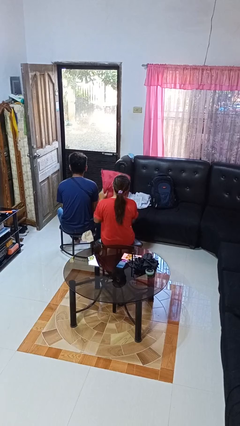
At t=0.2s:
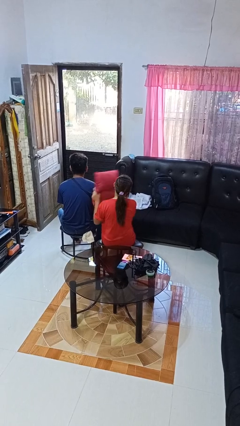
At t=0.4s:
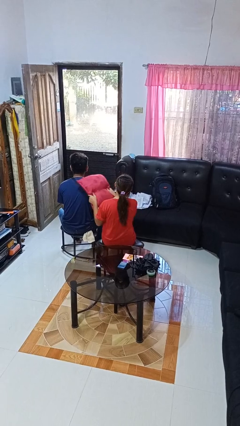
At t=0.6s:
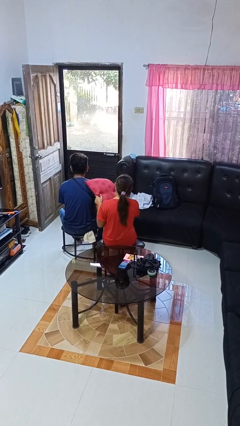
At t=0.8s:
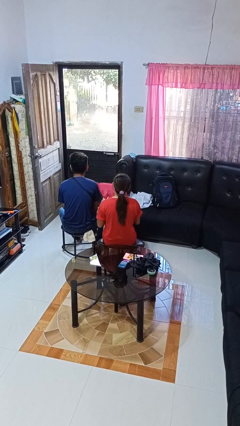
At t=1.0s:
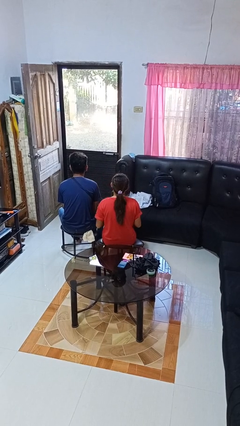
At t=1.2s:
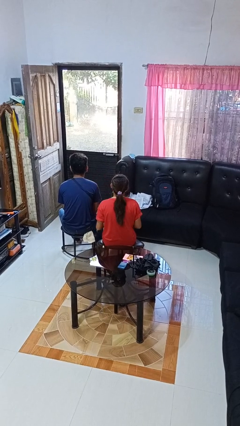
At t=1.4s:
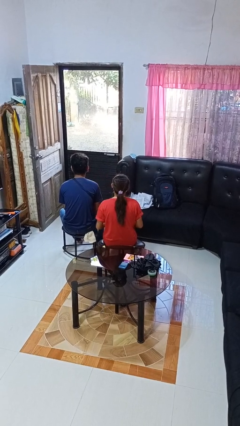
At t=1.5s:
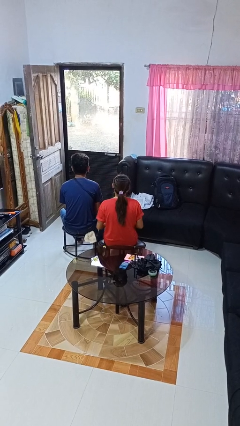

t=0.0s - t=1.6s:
person hits person with pillow

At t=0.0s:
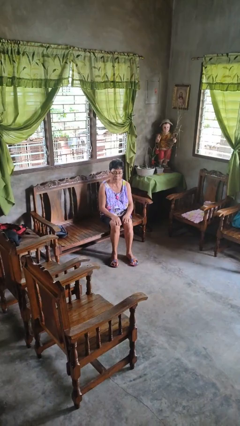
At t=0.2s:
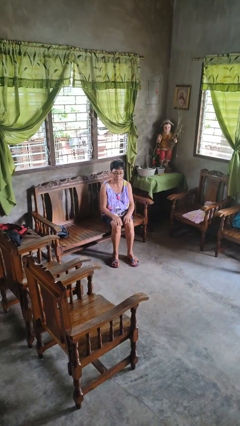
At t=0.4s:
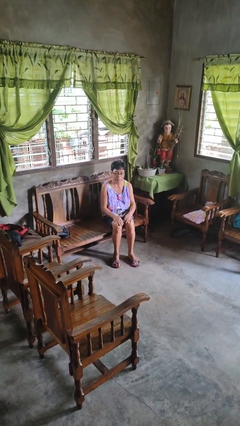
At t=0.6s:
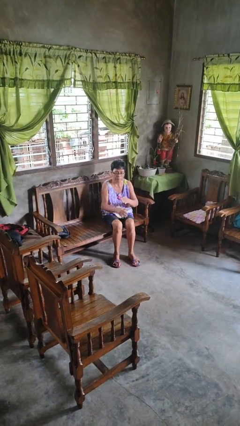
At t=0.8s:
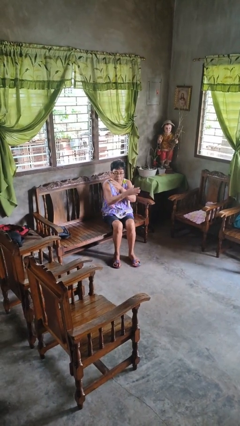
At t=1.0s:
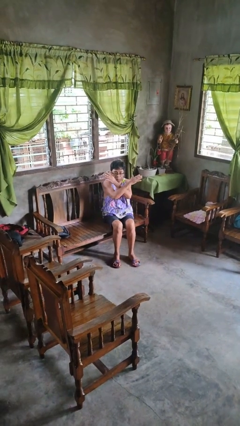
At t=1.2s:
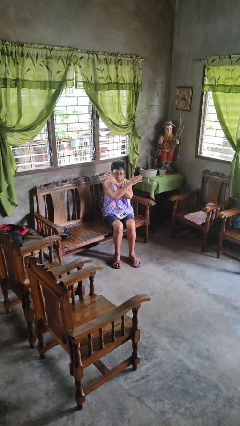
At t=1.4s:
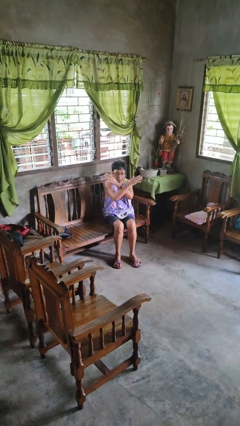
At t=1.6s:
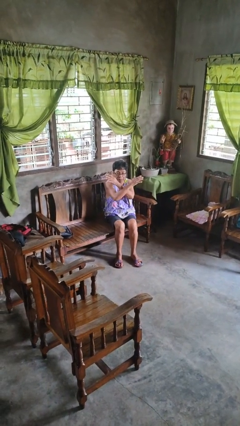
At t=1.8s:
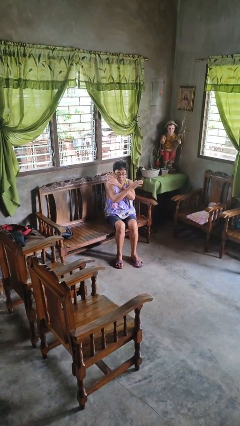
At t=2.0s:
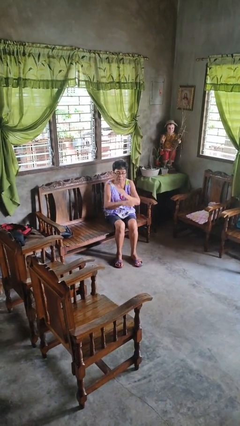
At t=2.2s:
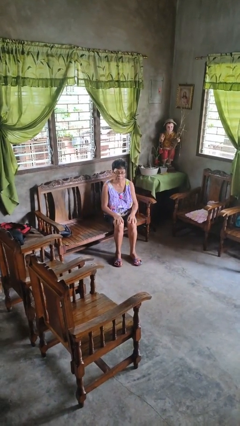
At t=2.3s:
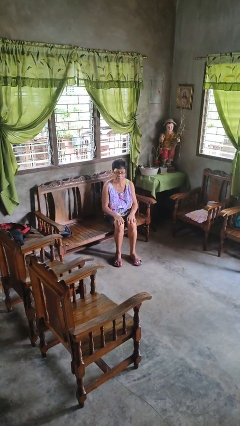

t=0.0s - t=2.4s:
person gestures arms x

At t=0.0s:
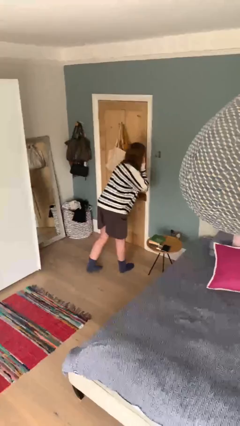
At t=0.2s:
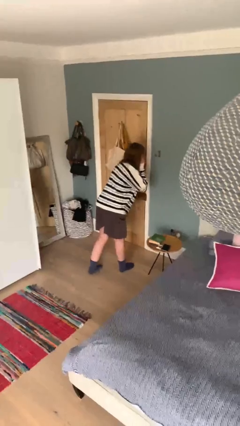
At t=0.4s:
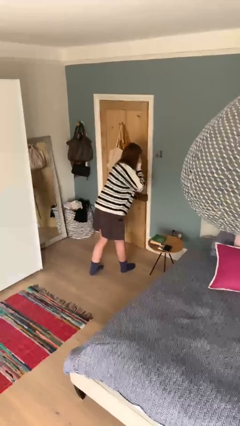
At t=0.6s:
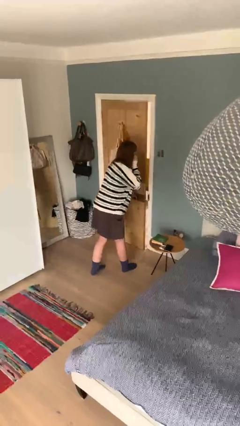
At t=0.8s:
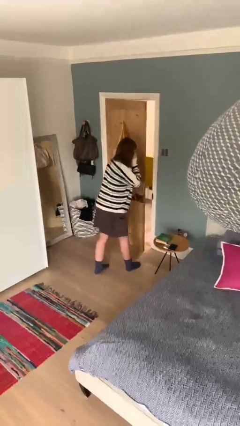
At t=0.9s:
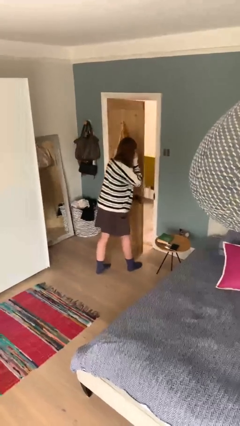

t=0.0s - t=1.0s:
person opens facility door

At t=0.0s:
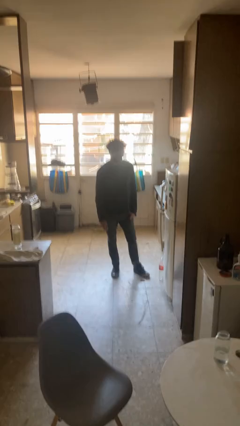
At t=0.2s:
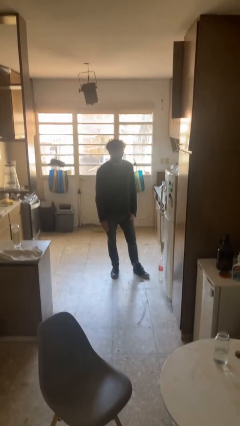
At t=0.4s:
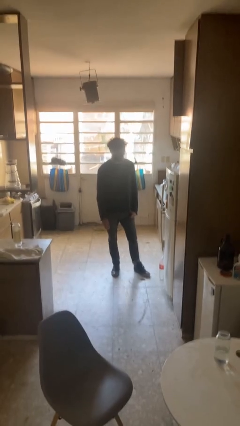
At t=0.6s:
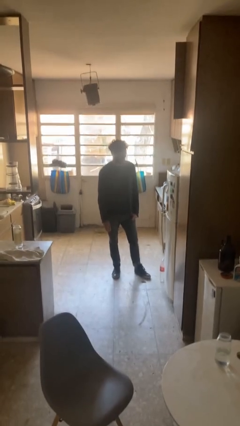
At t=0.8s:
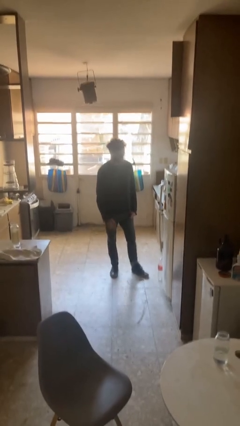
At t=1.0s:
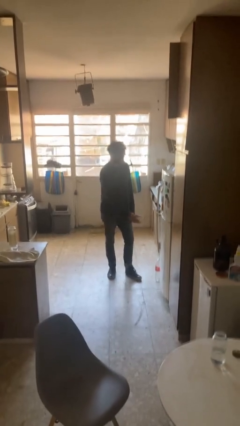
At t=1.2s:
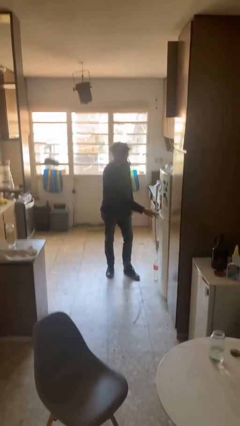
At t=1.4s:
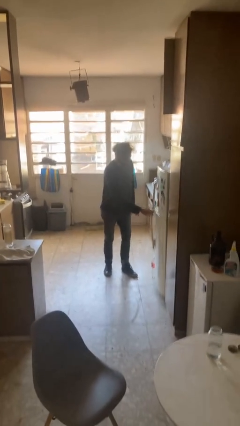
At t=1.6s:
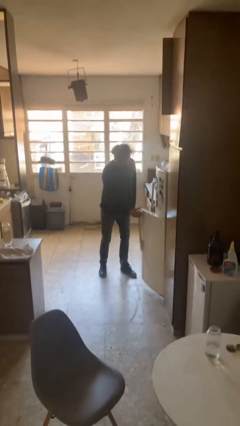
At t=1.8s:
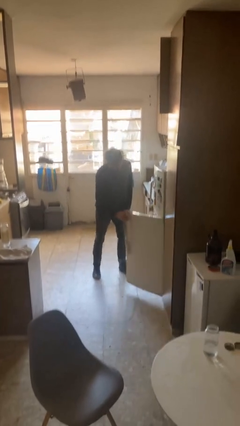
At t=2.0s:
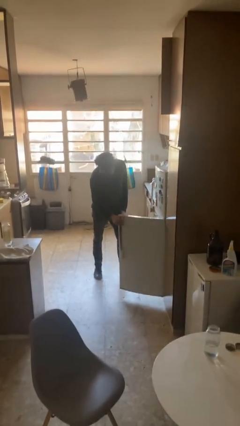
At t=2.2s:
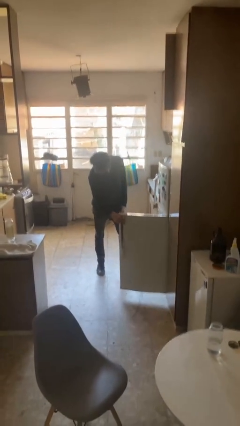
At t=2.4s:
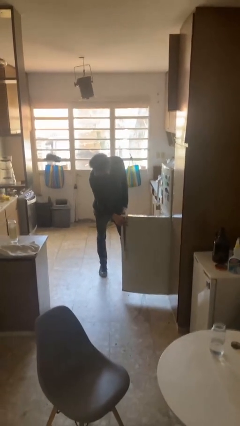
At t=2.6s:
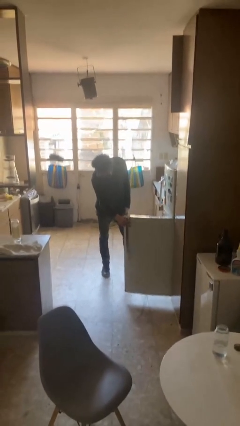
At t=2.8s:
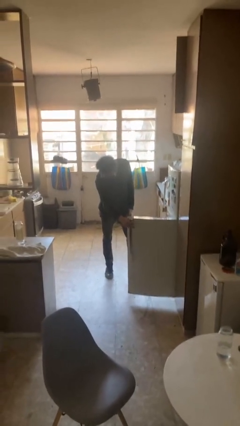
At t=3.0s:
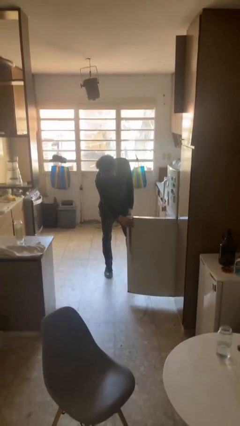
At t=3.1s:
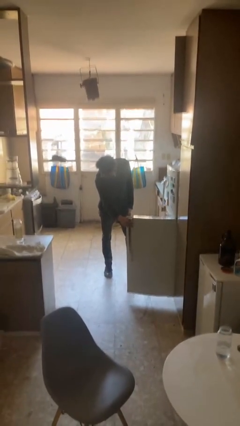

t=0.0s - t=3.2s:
person opens refrigerator

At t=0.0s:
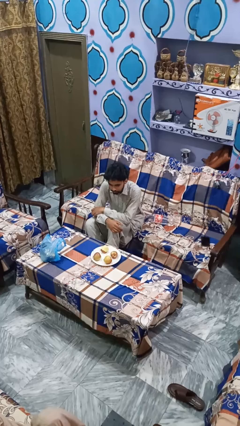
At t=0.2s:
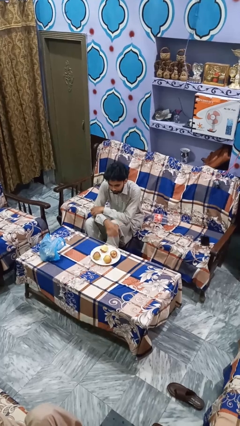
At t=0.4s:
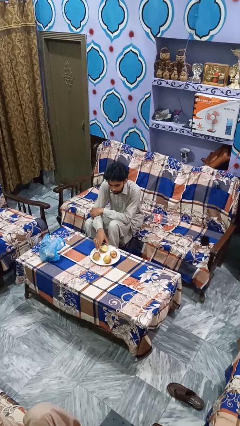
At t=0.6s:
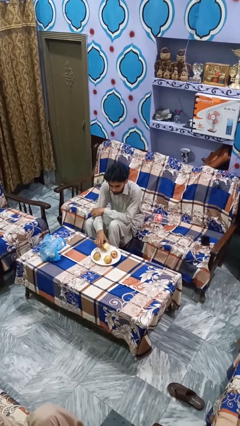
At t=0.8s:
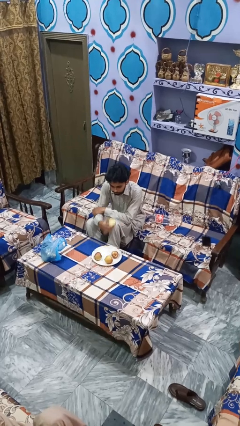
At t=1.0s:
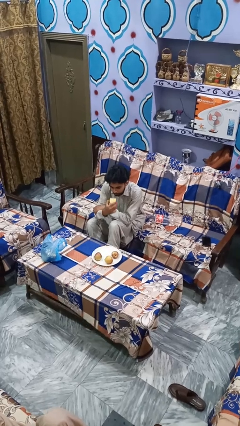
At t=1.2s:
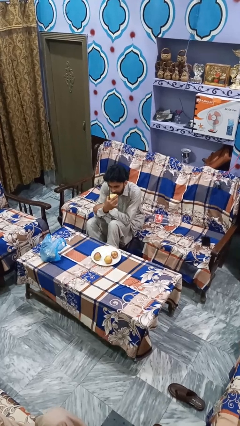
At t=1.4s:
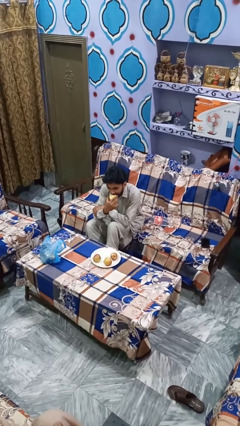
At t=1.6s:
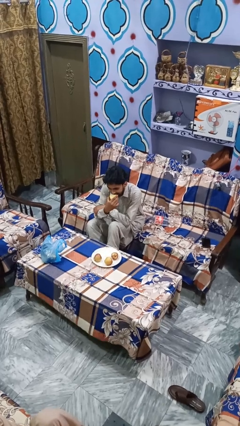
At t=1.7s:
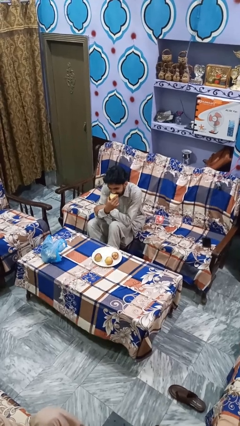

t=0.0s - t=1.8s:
person eats apple

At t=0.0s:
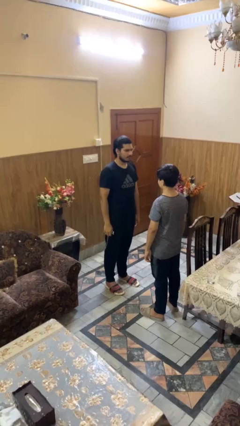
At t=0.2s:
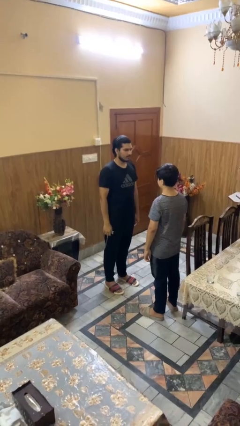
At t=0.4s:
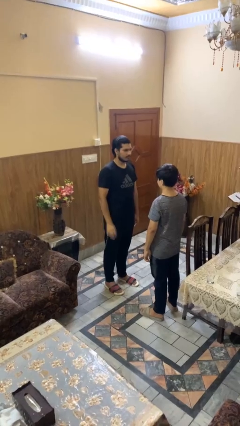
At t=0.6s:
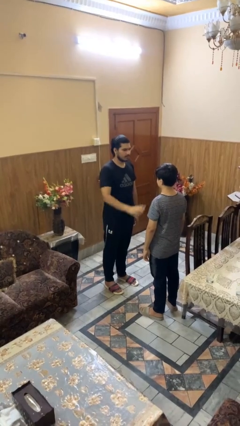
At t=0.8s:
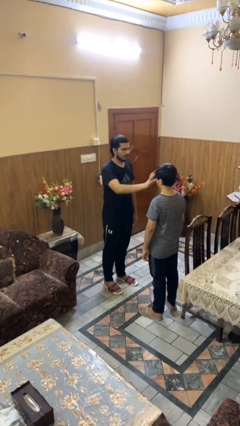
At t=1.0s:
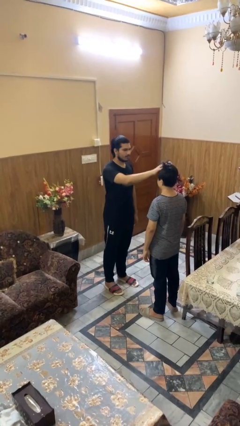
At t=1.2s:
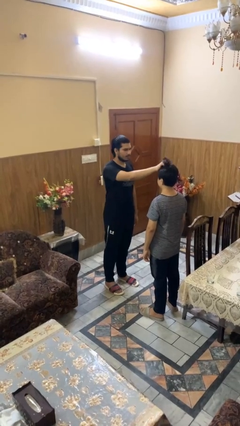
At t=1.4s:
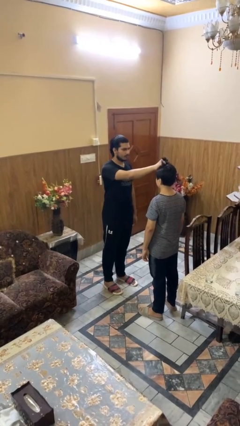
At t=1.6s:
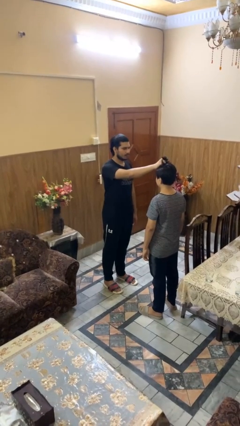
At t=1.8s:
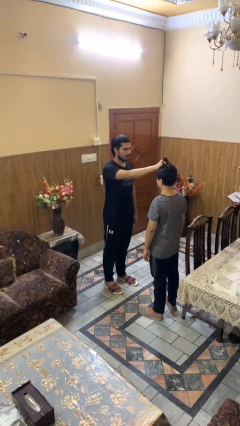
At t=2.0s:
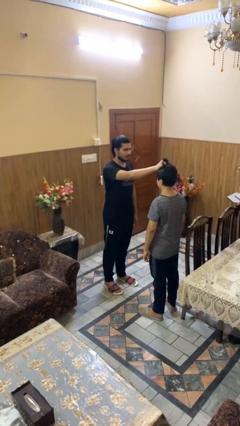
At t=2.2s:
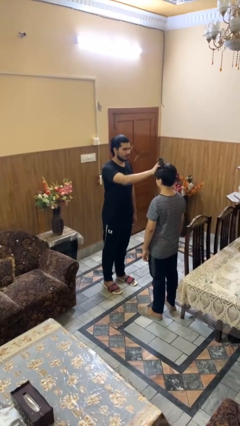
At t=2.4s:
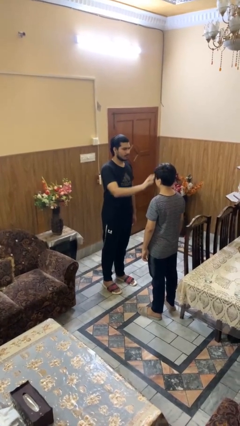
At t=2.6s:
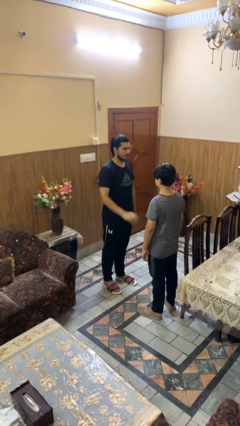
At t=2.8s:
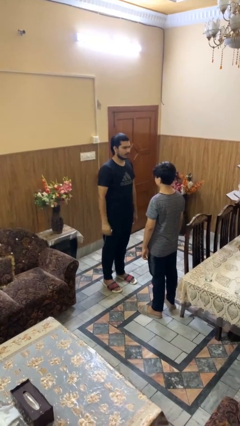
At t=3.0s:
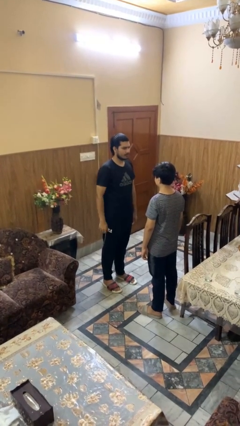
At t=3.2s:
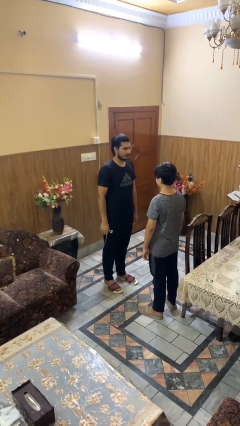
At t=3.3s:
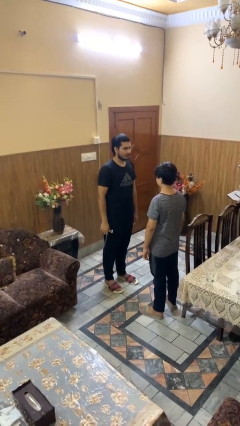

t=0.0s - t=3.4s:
person grabs person by hair

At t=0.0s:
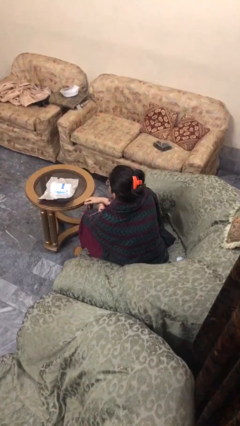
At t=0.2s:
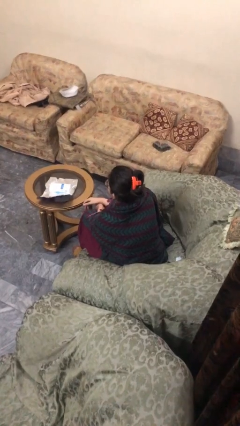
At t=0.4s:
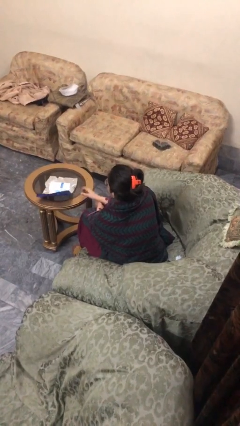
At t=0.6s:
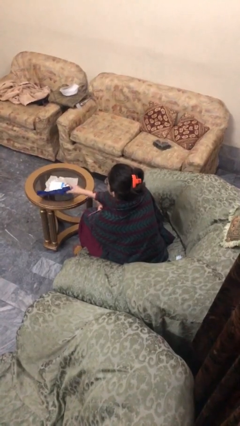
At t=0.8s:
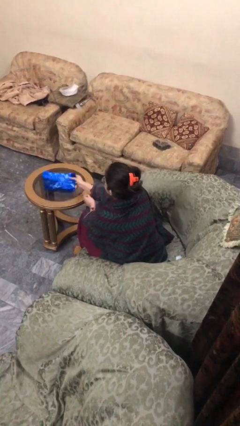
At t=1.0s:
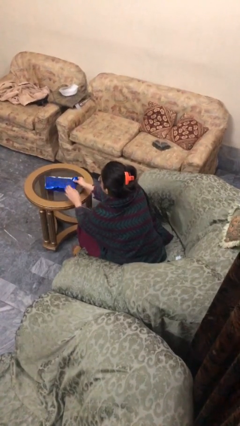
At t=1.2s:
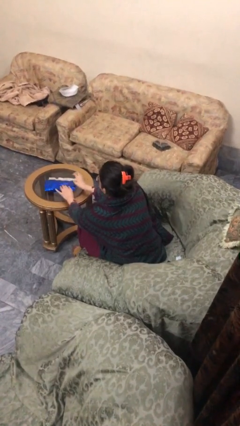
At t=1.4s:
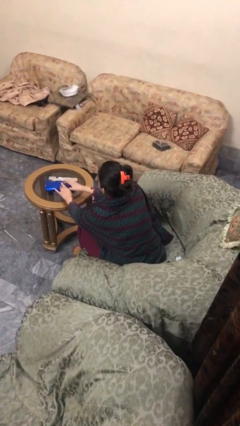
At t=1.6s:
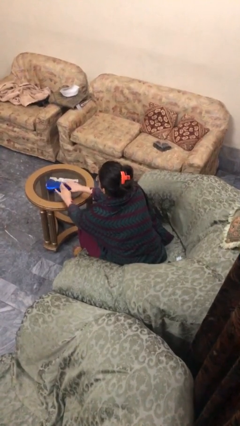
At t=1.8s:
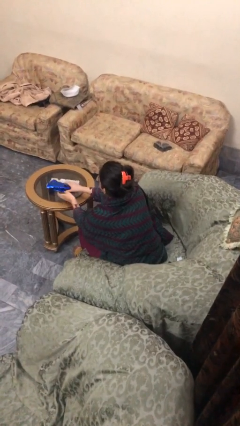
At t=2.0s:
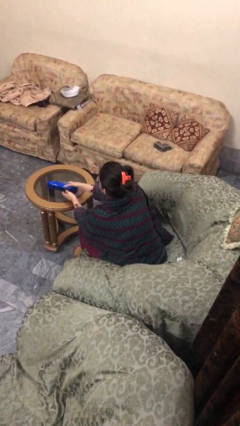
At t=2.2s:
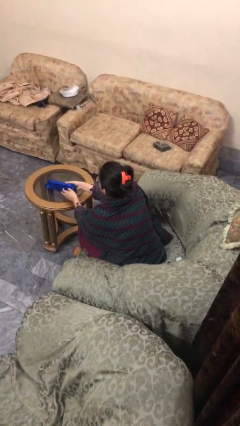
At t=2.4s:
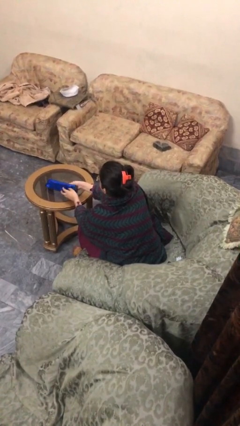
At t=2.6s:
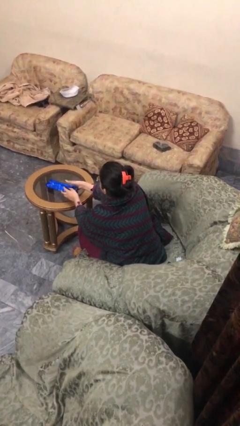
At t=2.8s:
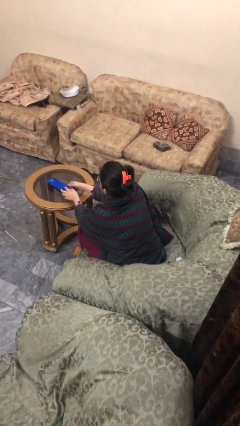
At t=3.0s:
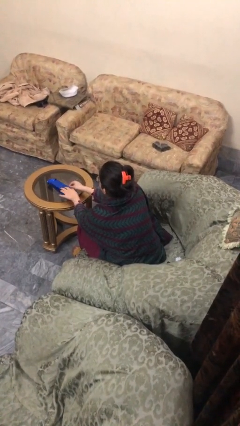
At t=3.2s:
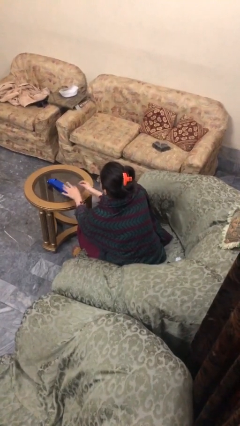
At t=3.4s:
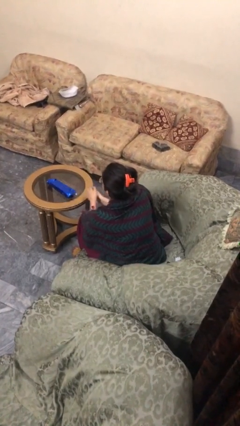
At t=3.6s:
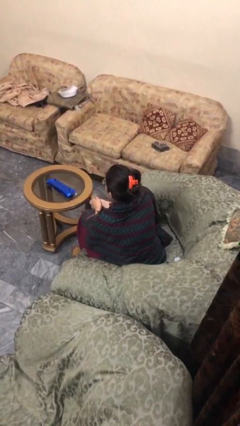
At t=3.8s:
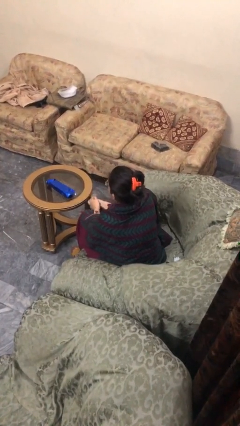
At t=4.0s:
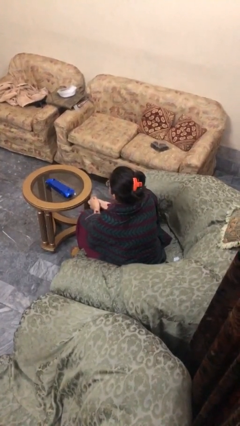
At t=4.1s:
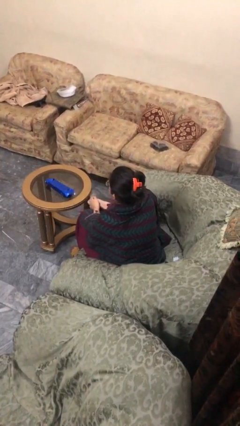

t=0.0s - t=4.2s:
person wraps box
